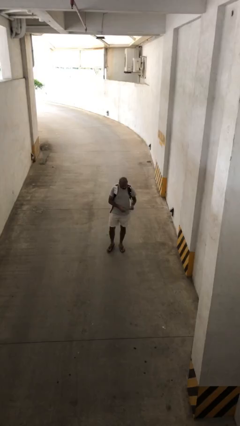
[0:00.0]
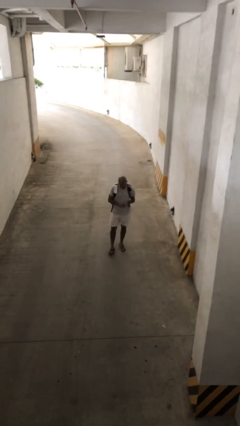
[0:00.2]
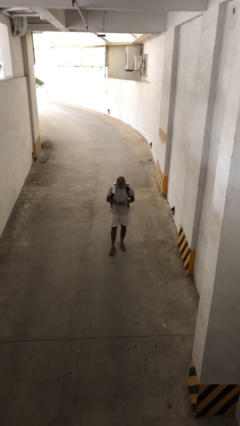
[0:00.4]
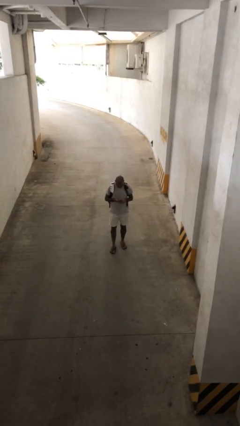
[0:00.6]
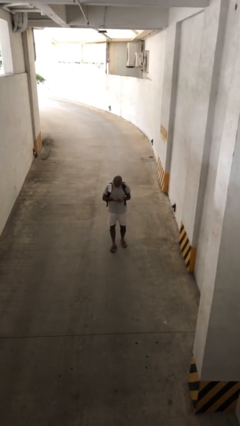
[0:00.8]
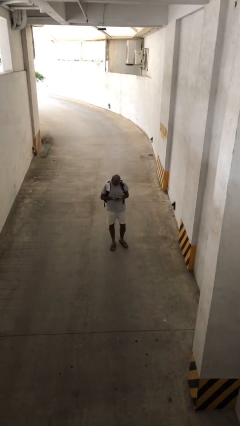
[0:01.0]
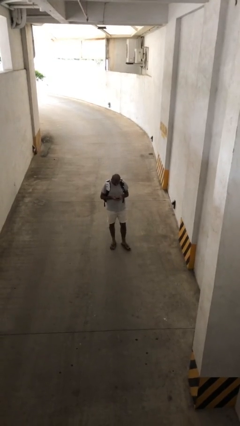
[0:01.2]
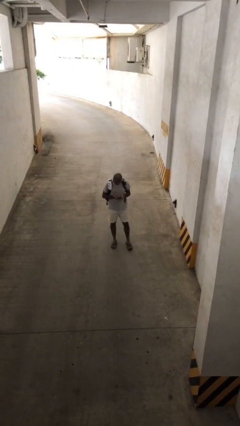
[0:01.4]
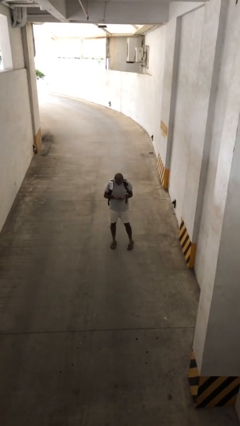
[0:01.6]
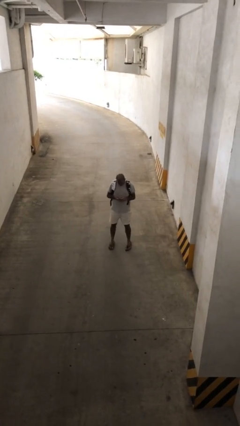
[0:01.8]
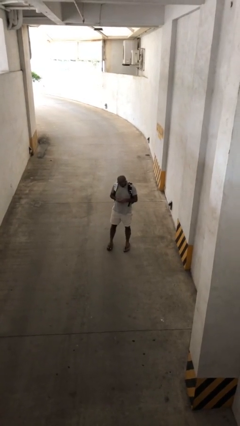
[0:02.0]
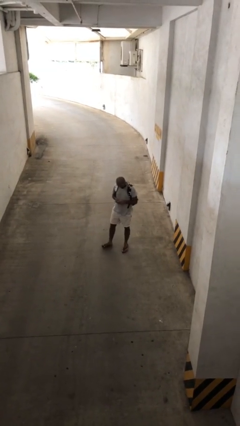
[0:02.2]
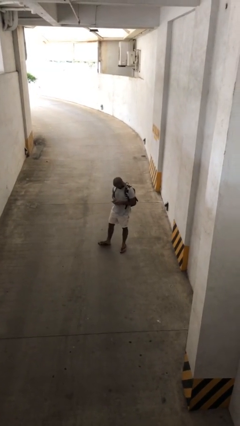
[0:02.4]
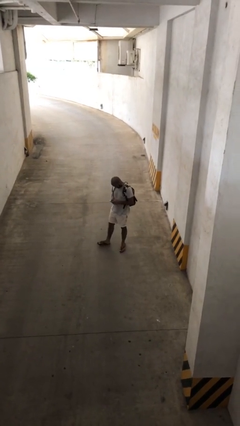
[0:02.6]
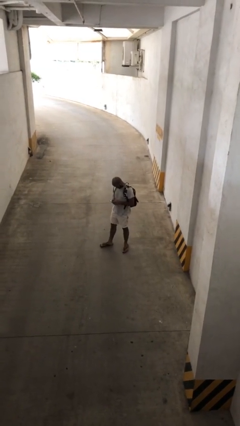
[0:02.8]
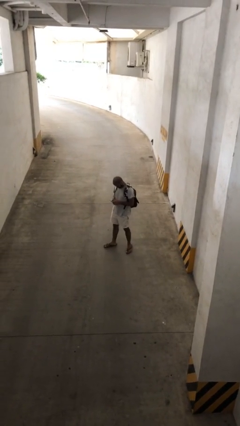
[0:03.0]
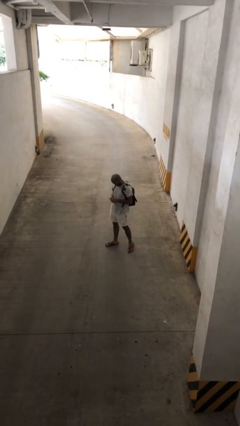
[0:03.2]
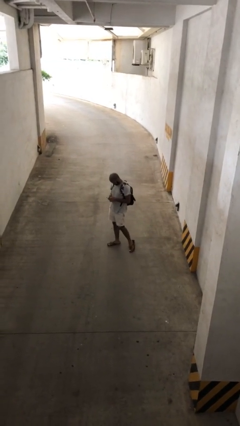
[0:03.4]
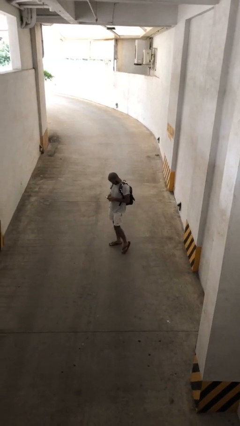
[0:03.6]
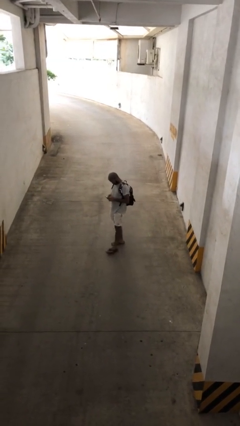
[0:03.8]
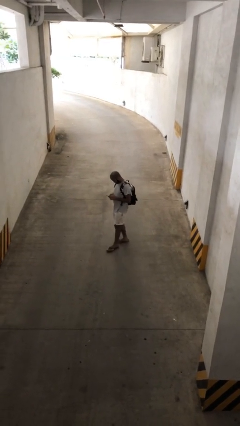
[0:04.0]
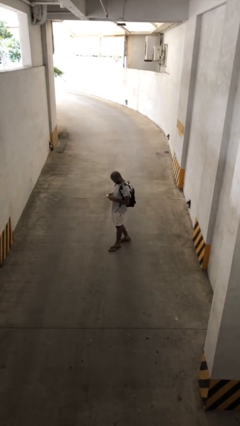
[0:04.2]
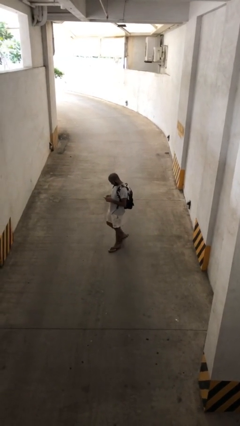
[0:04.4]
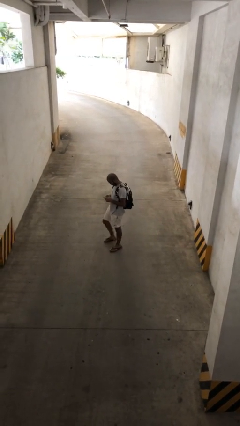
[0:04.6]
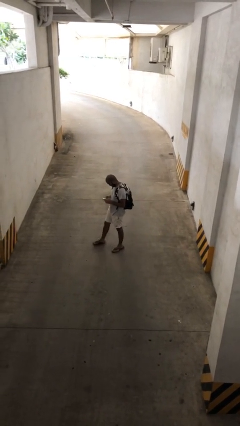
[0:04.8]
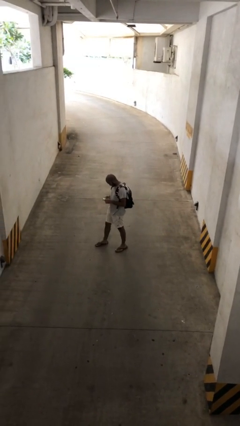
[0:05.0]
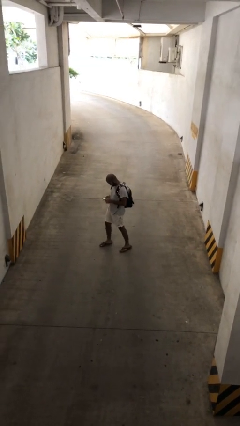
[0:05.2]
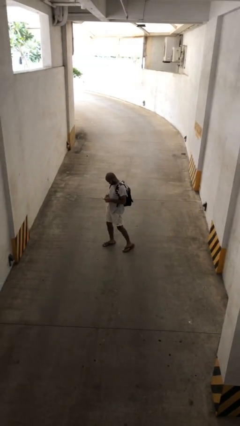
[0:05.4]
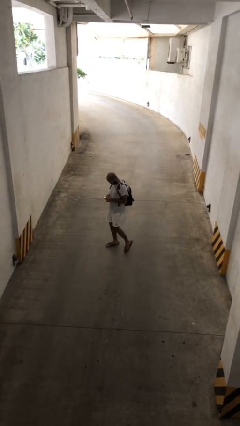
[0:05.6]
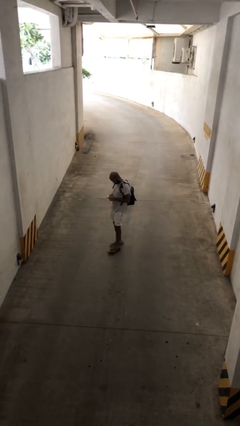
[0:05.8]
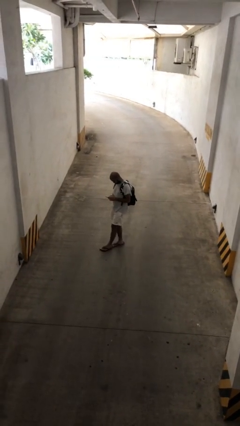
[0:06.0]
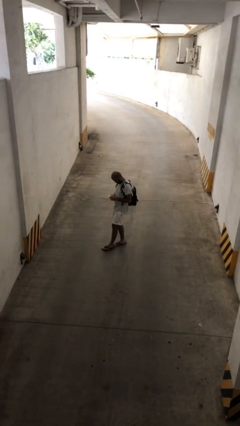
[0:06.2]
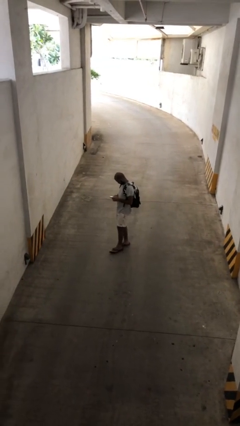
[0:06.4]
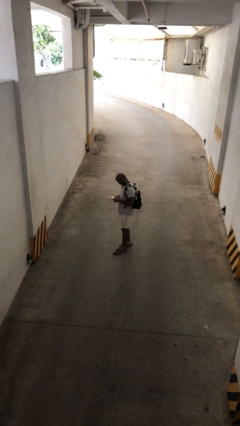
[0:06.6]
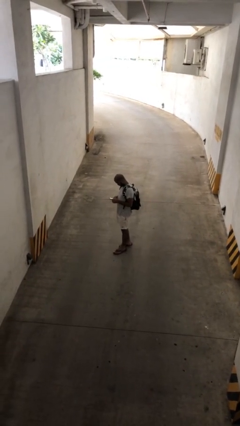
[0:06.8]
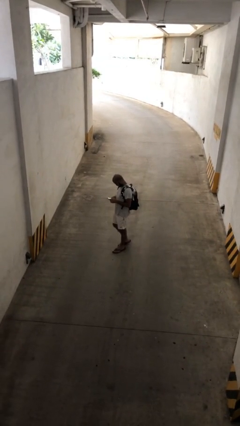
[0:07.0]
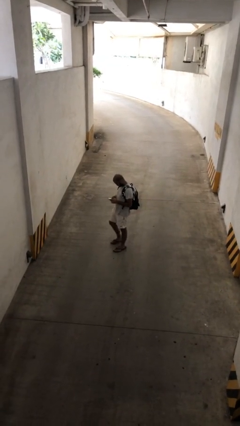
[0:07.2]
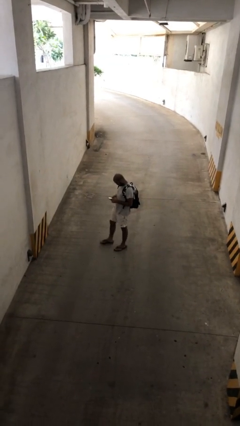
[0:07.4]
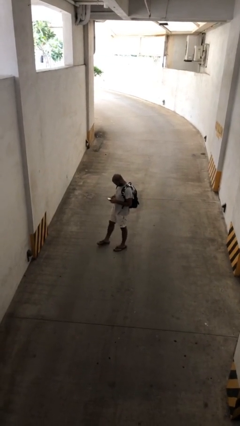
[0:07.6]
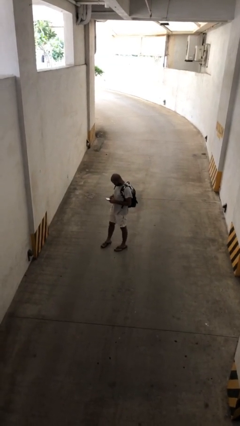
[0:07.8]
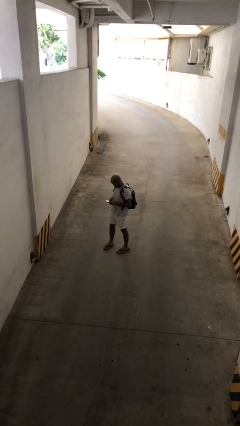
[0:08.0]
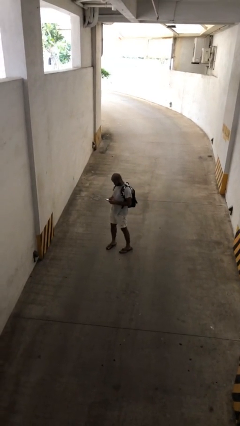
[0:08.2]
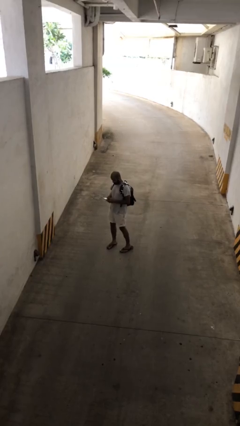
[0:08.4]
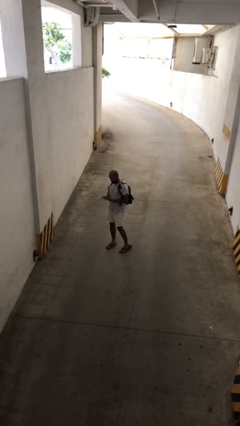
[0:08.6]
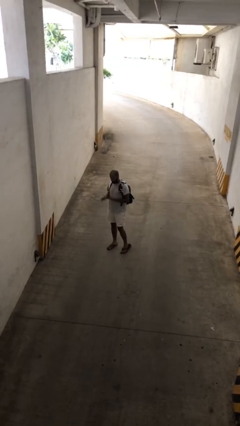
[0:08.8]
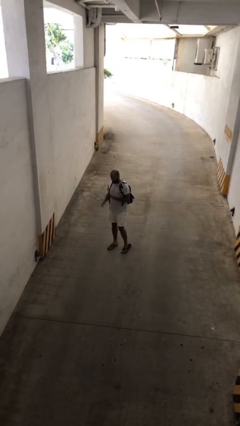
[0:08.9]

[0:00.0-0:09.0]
person texts on phone

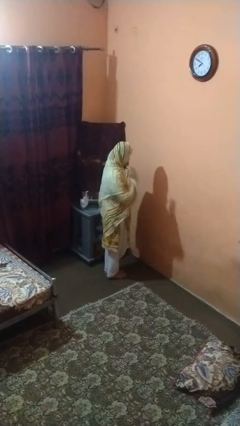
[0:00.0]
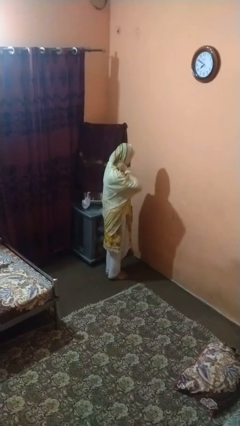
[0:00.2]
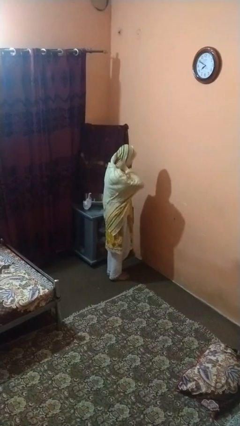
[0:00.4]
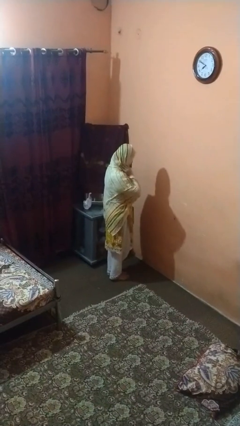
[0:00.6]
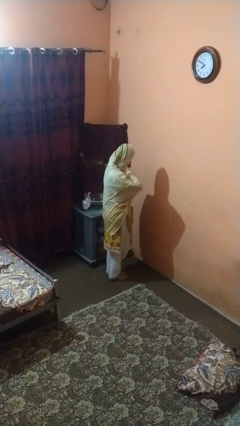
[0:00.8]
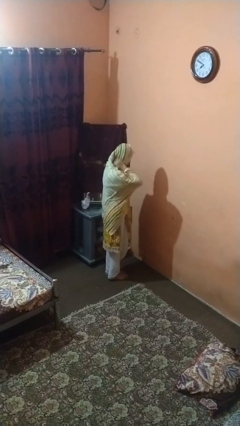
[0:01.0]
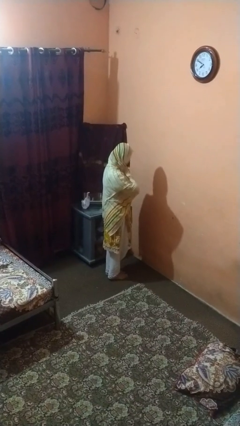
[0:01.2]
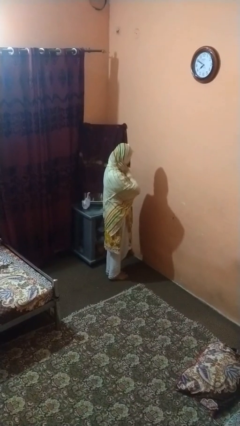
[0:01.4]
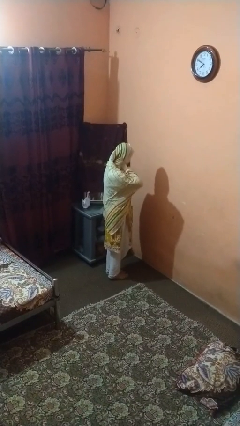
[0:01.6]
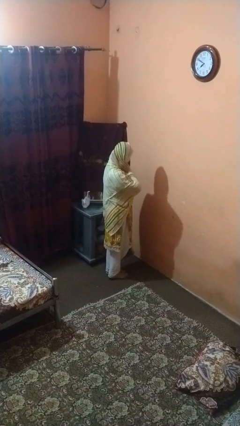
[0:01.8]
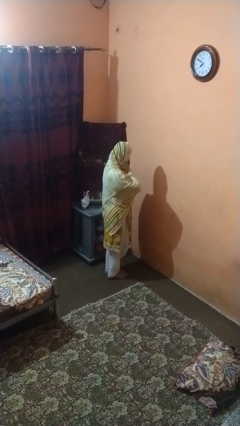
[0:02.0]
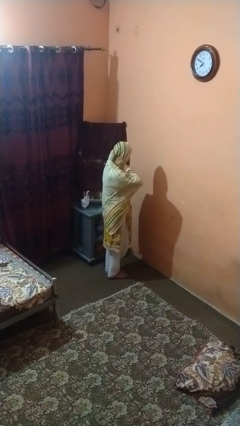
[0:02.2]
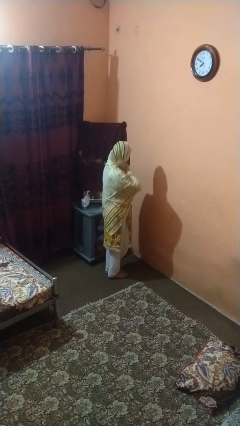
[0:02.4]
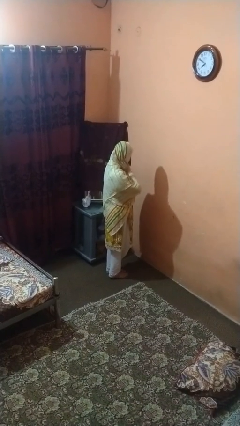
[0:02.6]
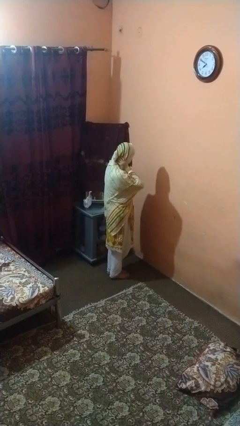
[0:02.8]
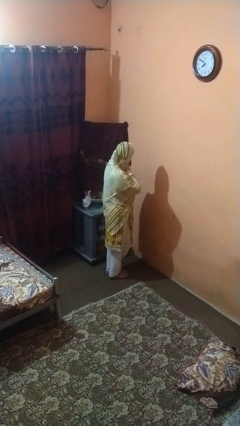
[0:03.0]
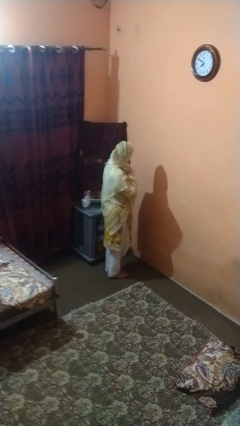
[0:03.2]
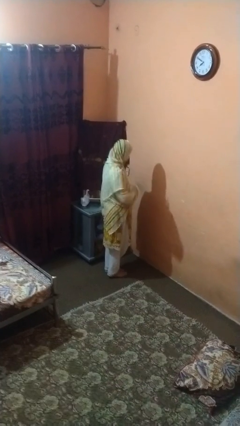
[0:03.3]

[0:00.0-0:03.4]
person rubs neck

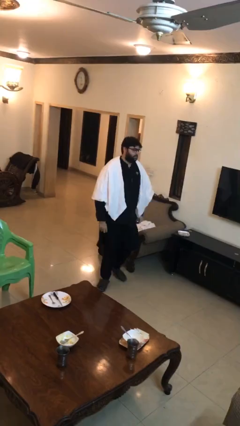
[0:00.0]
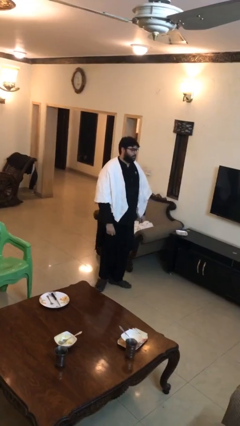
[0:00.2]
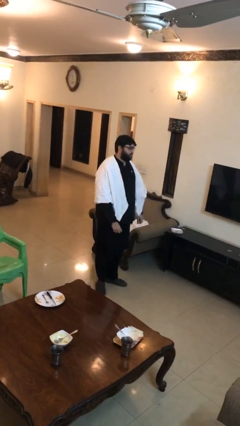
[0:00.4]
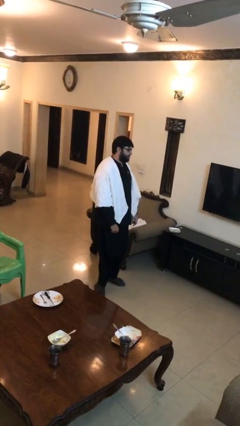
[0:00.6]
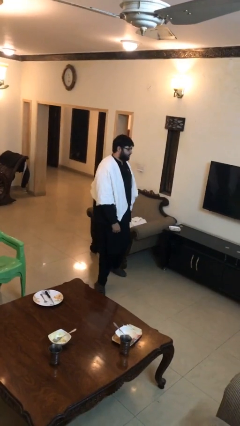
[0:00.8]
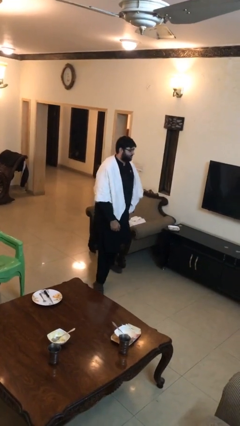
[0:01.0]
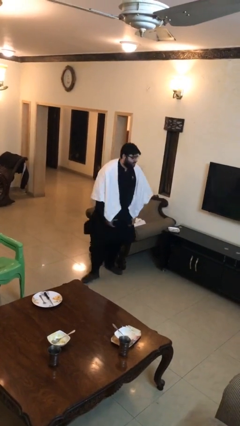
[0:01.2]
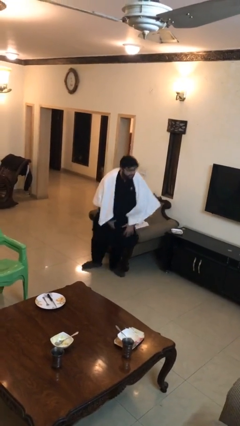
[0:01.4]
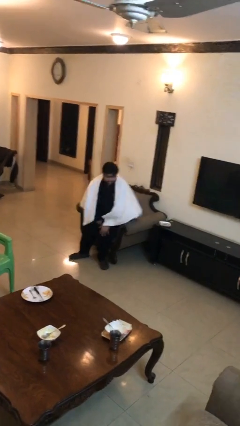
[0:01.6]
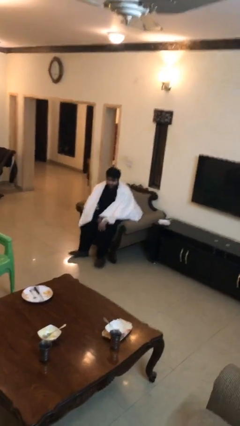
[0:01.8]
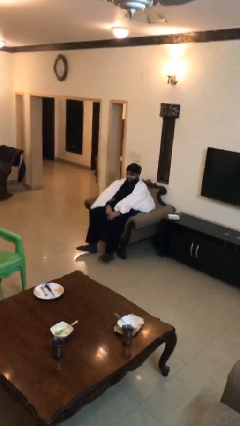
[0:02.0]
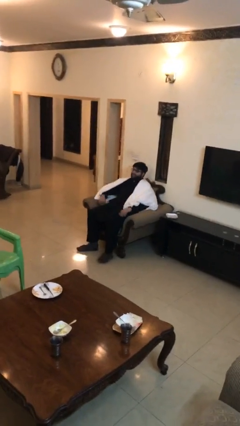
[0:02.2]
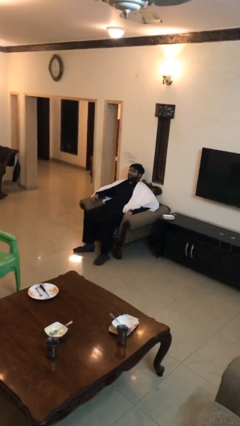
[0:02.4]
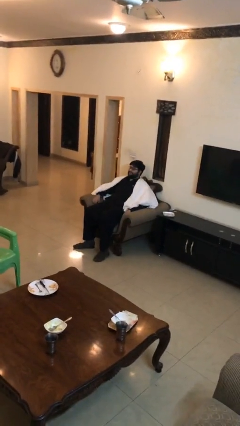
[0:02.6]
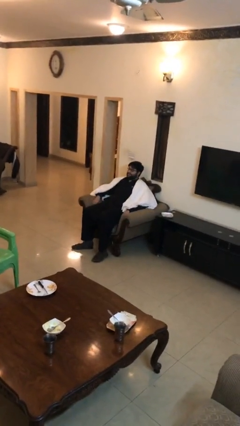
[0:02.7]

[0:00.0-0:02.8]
person sits down

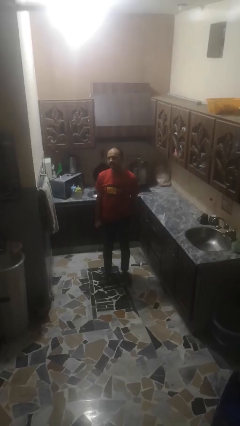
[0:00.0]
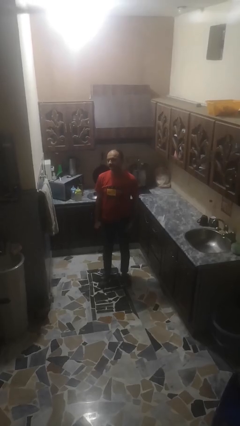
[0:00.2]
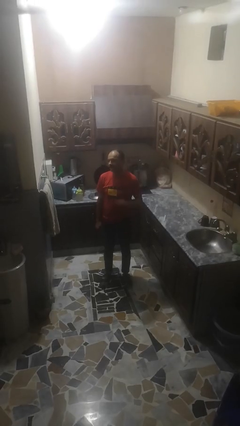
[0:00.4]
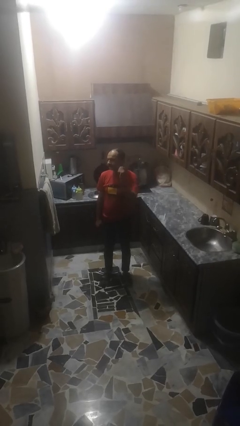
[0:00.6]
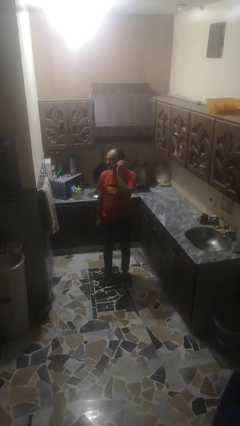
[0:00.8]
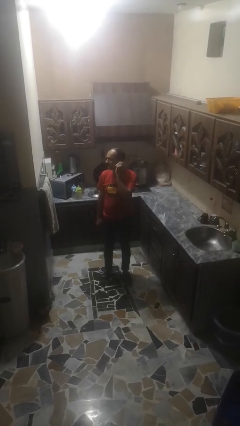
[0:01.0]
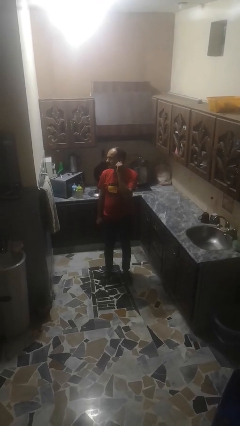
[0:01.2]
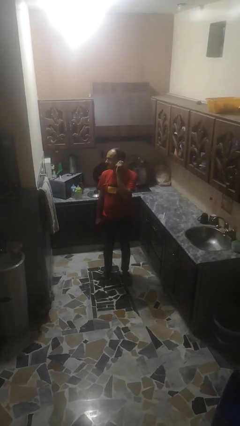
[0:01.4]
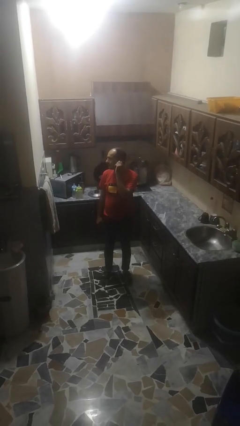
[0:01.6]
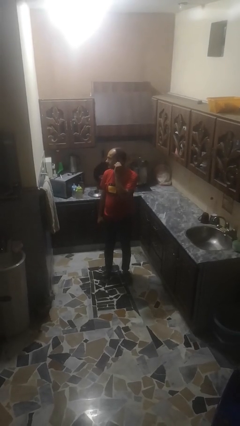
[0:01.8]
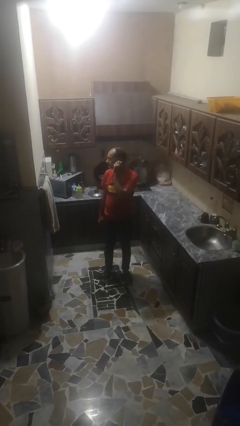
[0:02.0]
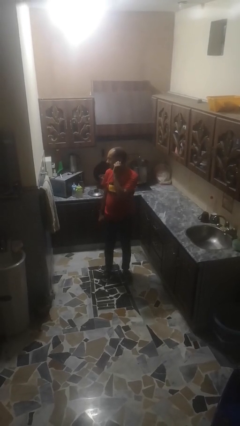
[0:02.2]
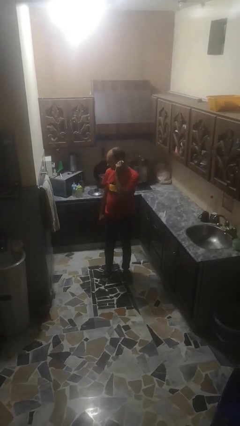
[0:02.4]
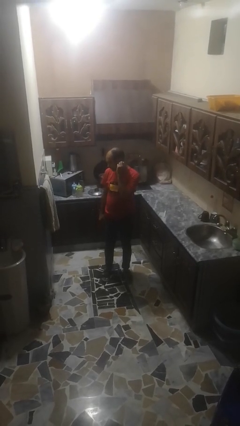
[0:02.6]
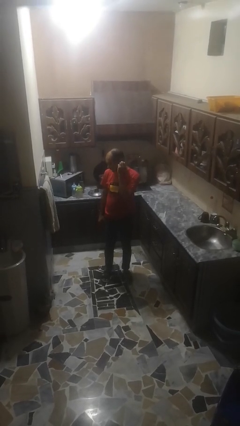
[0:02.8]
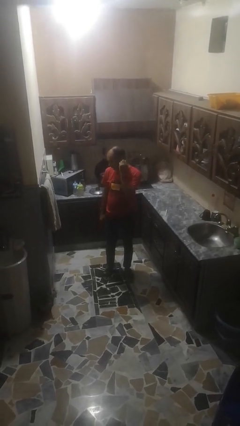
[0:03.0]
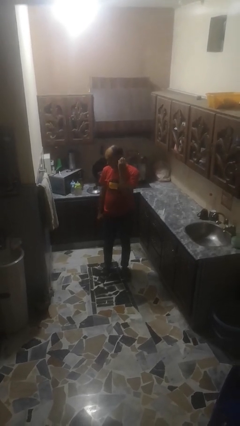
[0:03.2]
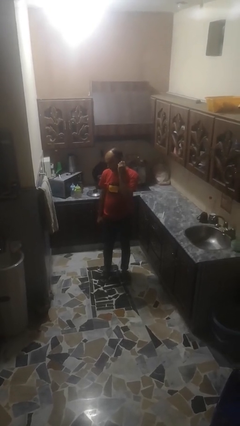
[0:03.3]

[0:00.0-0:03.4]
person touches earlobe
